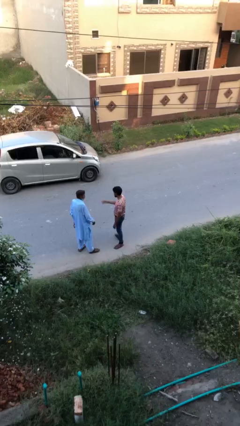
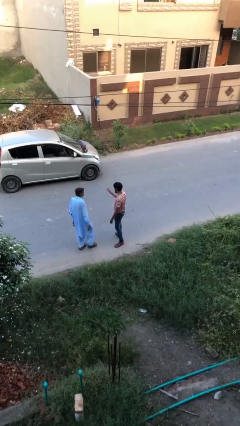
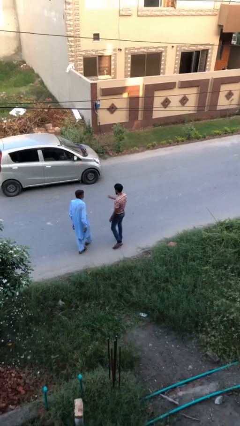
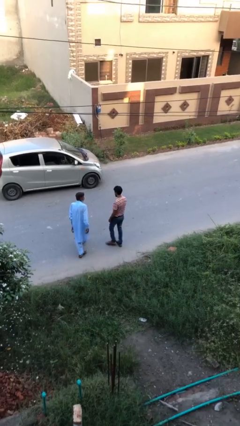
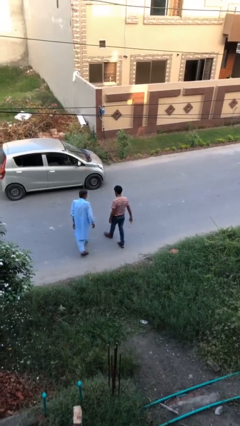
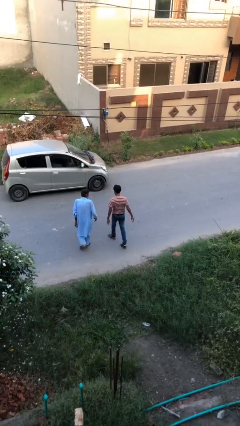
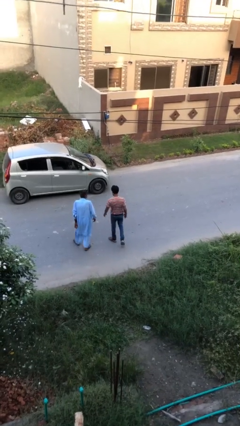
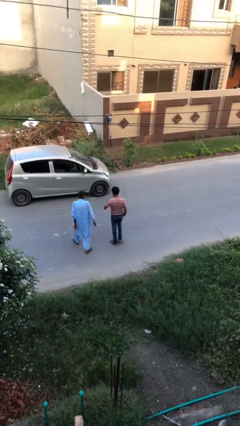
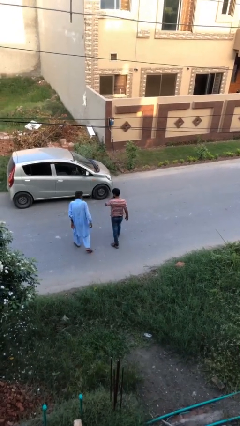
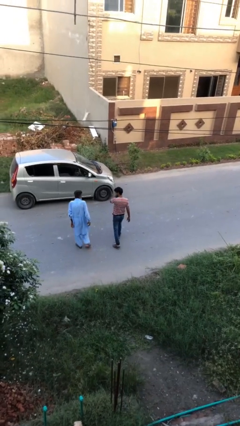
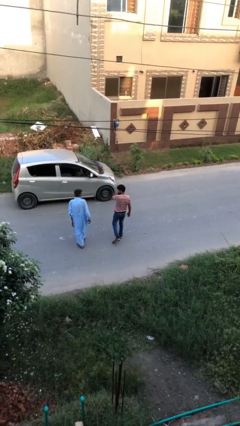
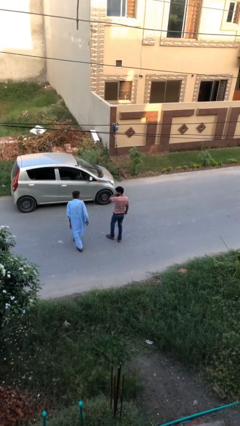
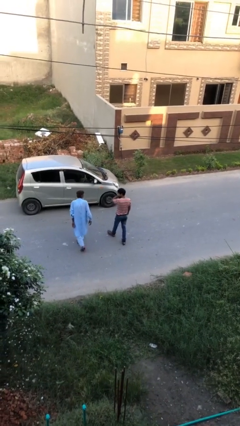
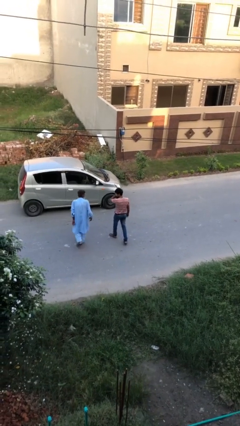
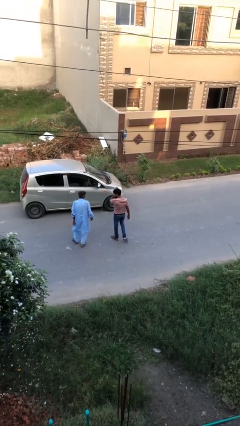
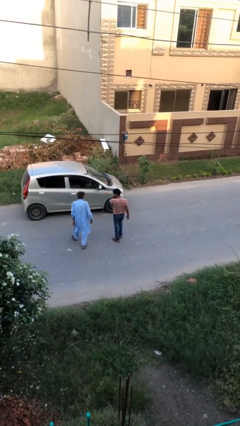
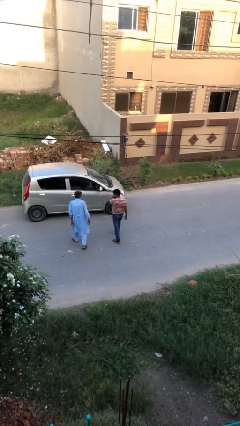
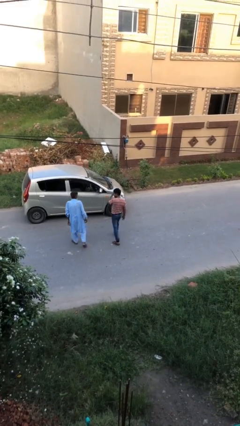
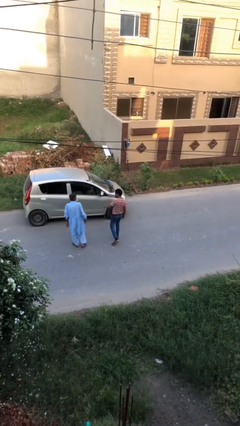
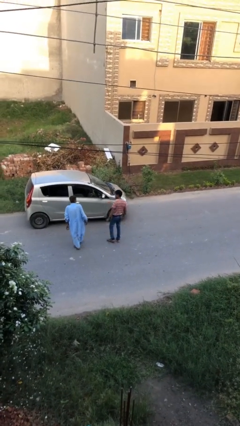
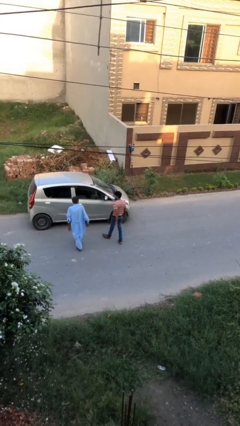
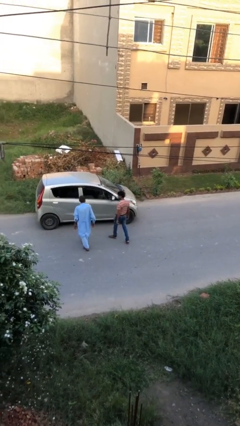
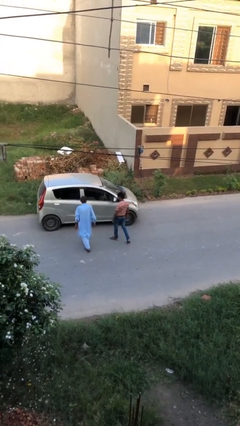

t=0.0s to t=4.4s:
person talks to person

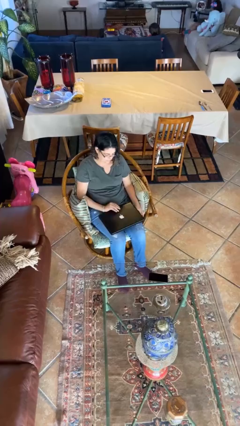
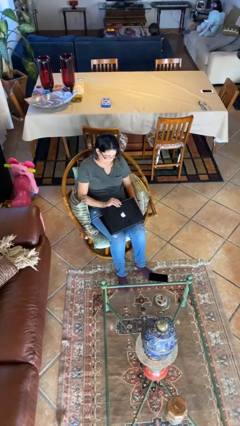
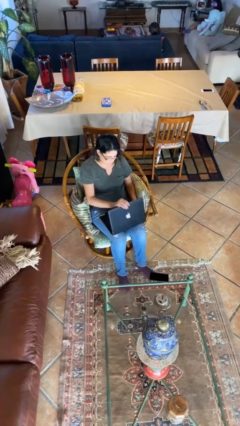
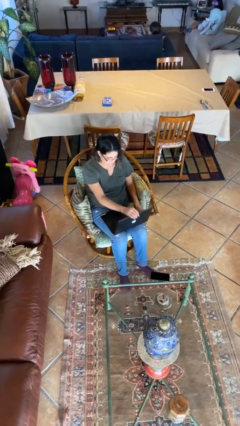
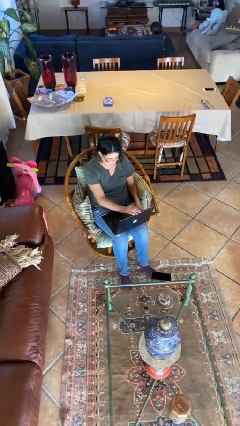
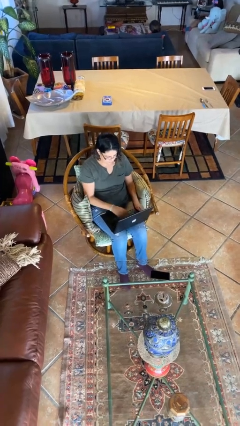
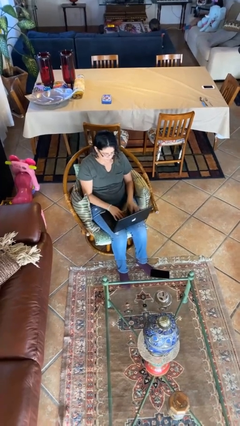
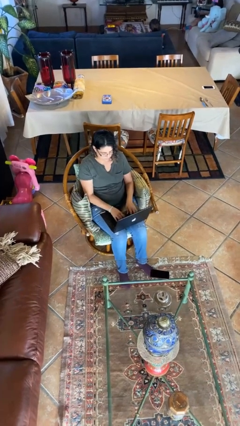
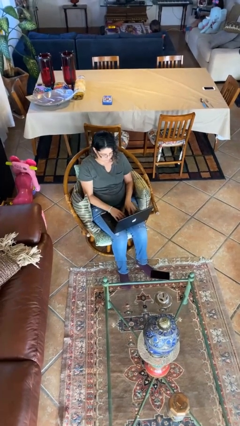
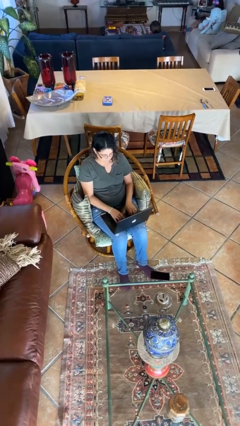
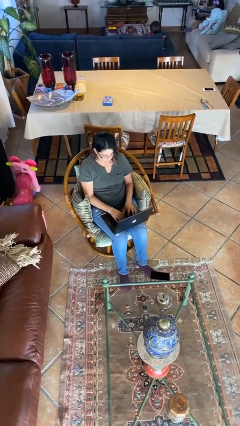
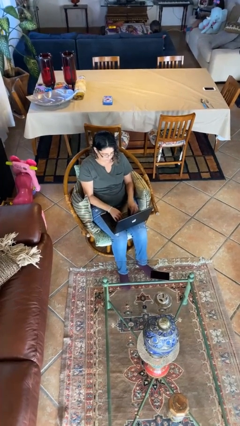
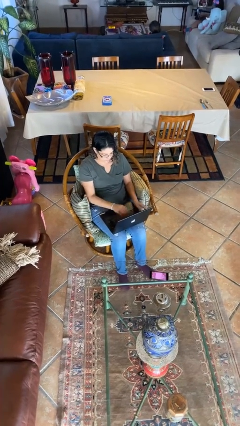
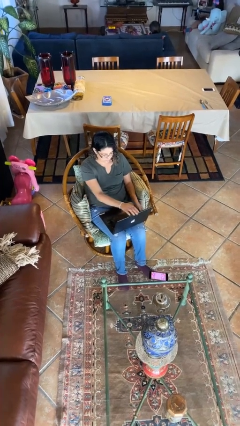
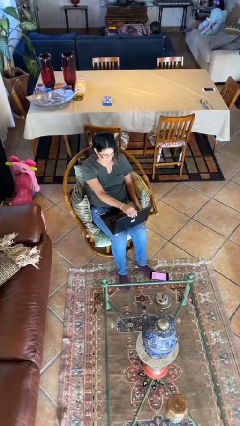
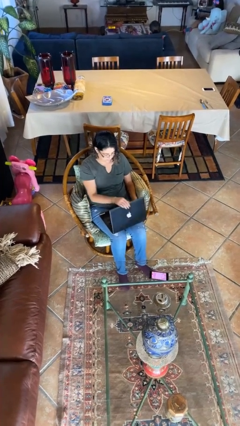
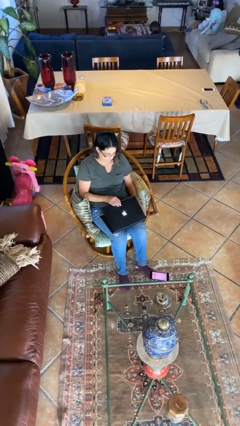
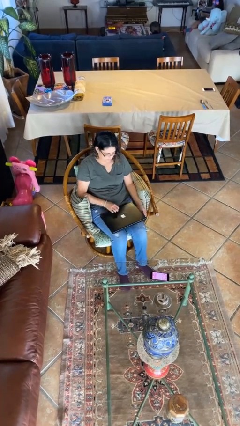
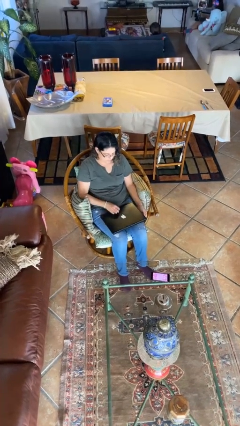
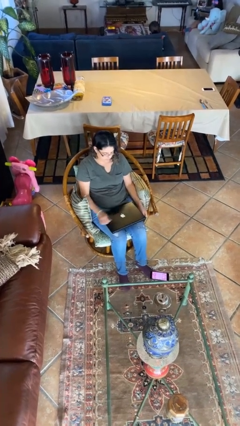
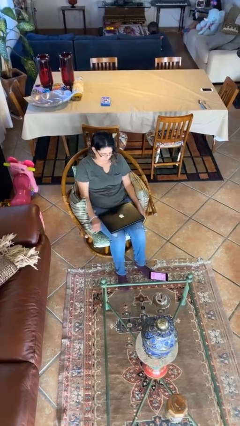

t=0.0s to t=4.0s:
person interacts with laptop

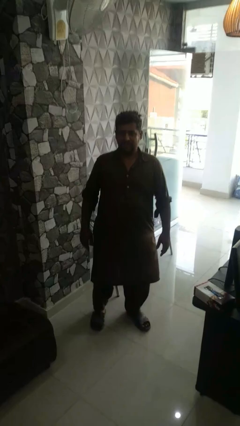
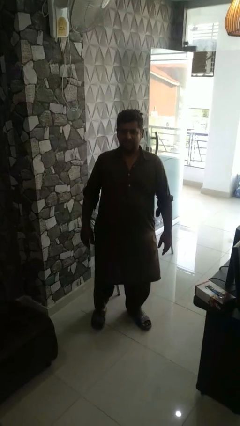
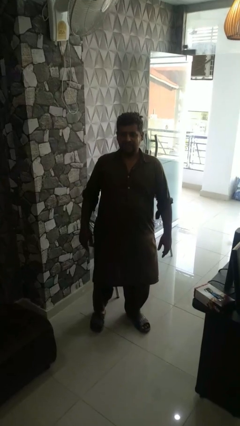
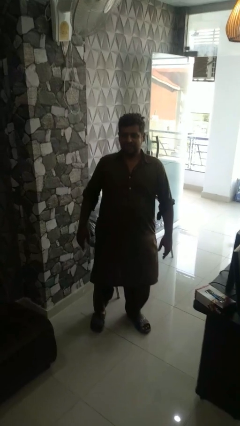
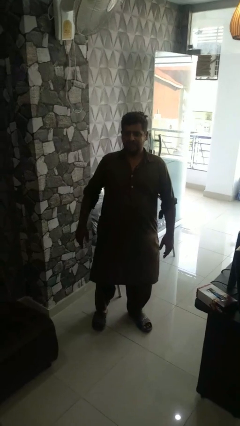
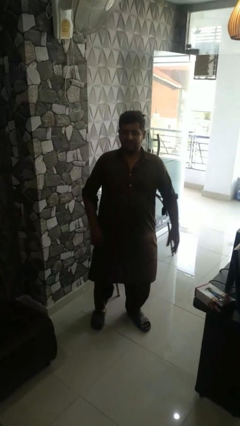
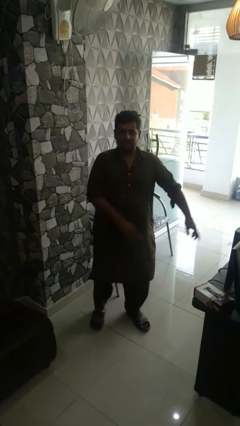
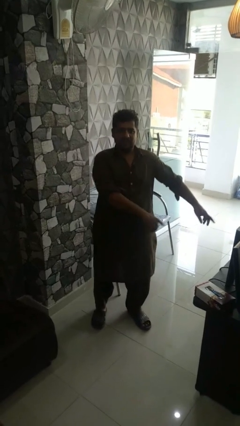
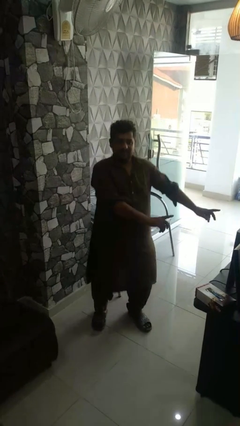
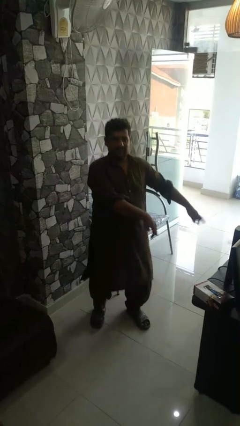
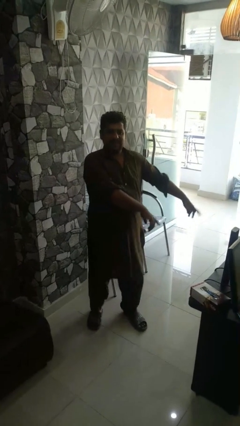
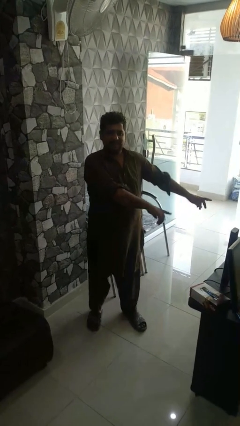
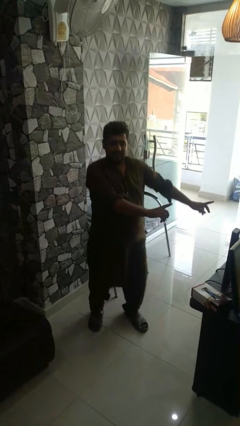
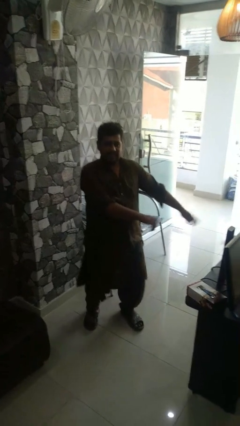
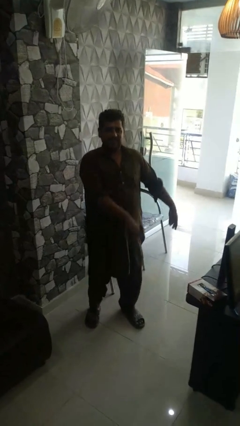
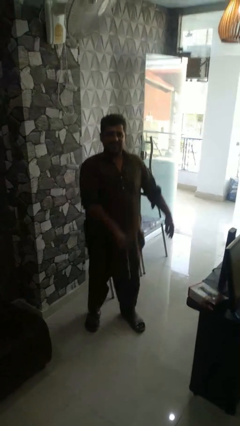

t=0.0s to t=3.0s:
person dances in place

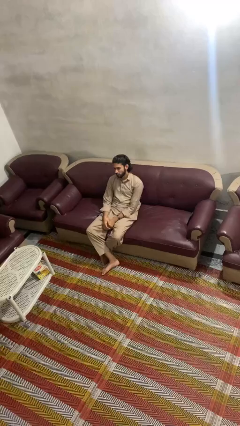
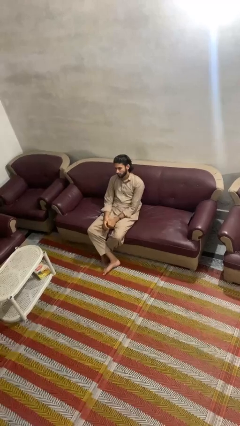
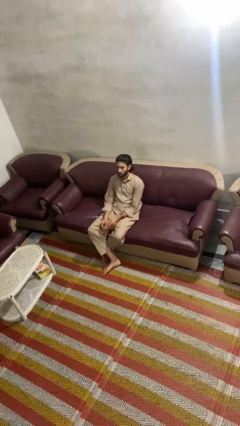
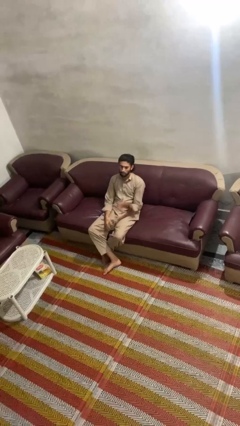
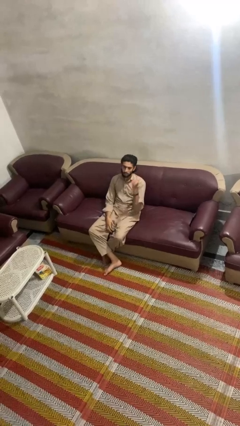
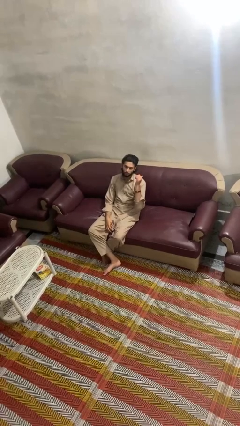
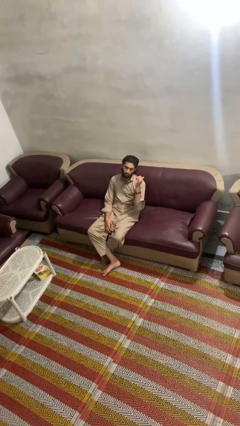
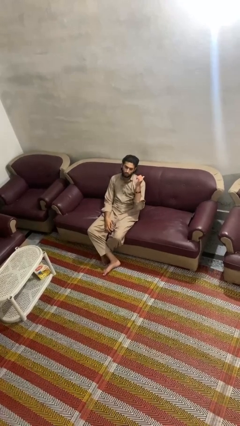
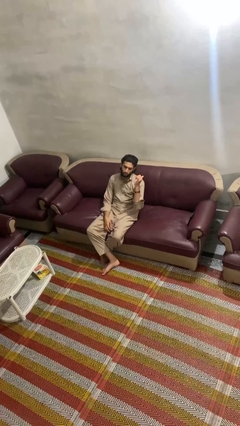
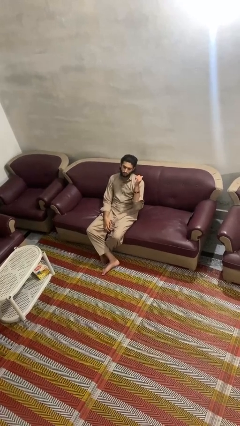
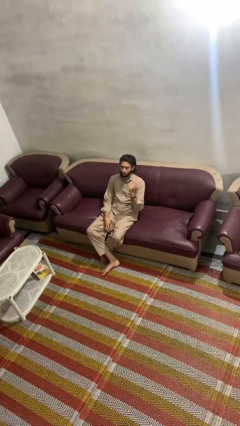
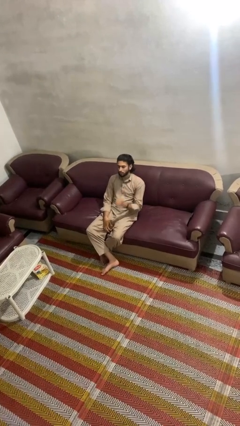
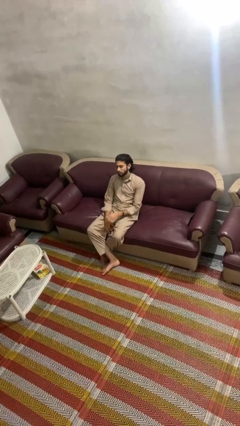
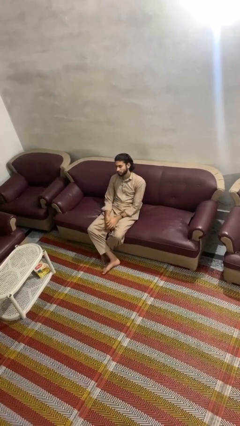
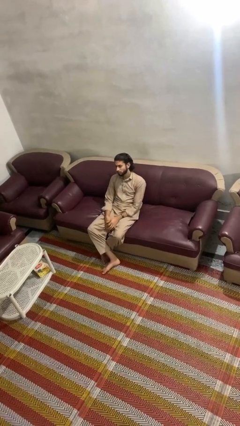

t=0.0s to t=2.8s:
person gestures behind me

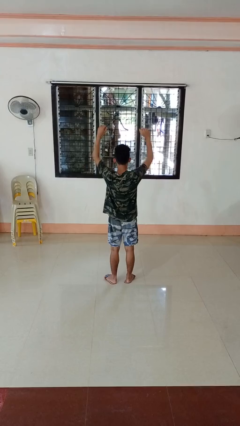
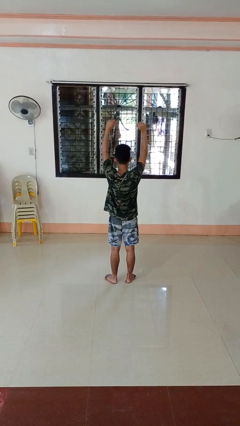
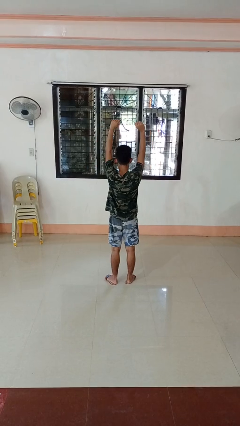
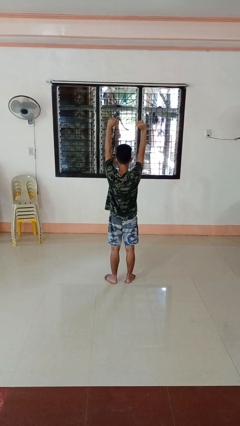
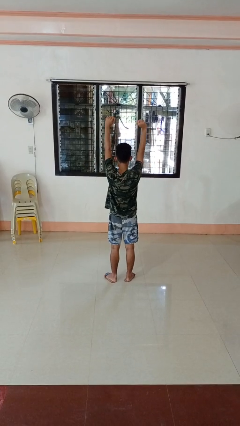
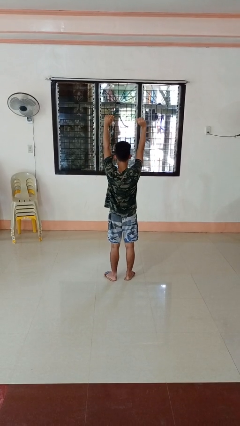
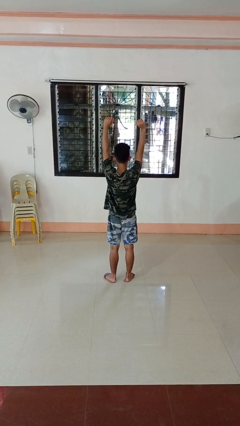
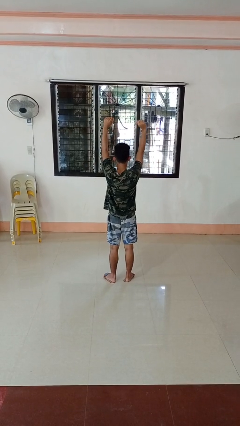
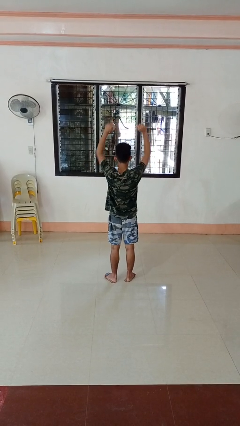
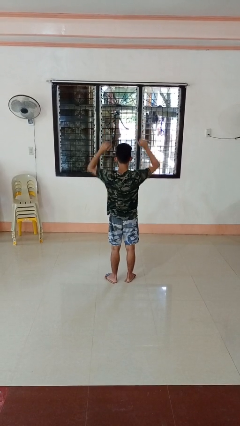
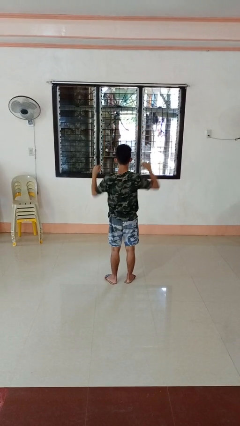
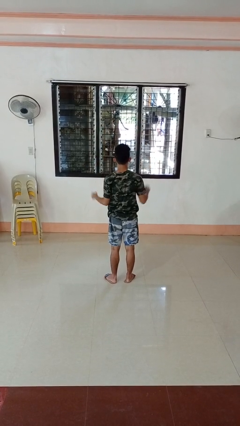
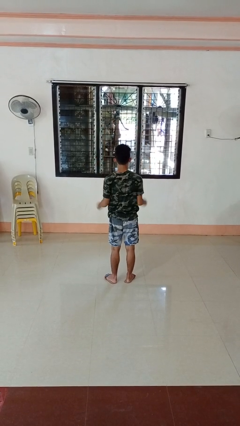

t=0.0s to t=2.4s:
person stretches arms over head

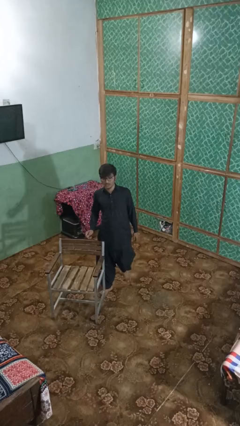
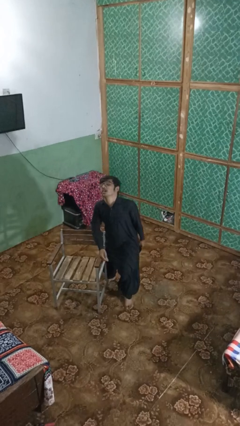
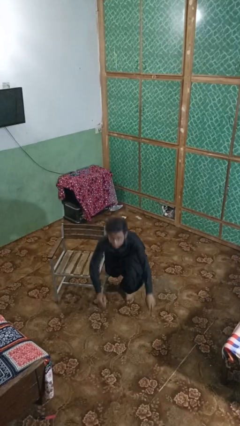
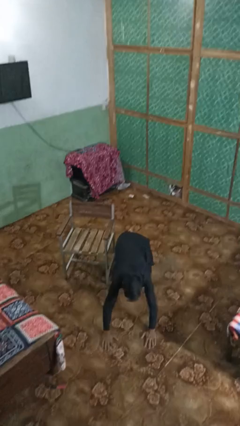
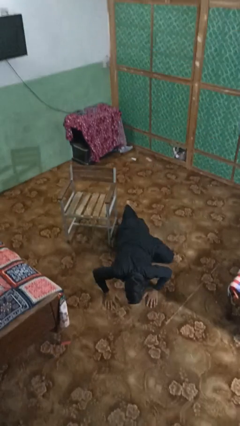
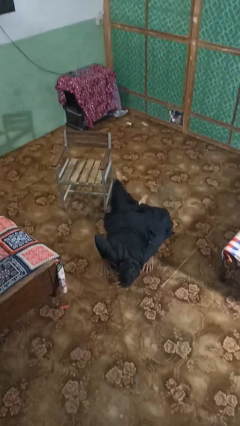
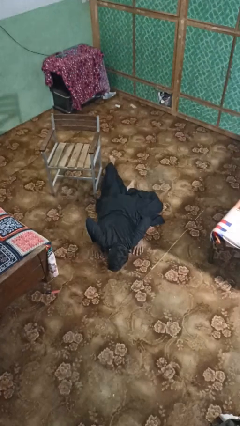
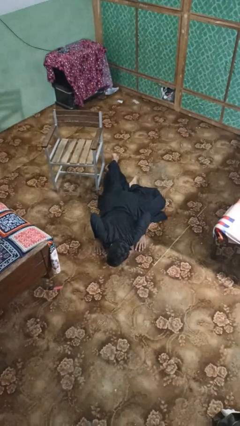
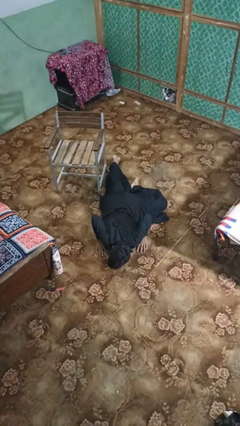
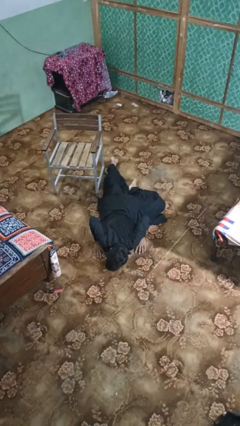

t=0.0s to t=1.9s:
person lies down on floor
